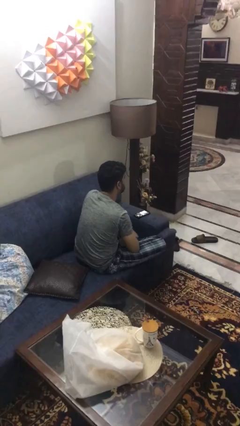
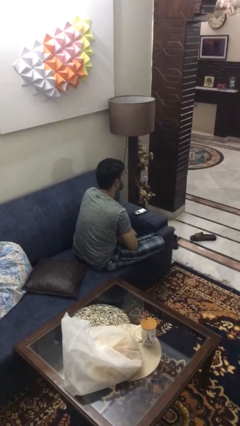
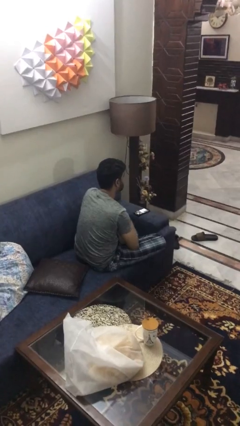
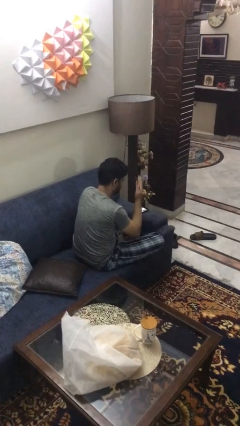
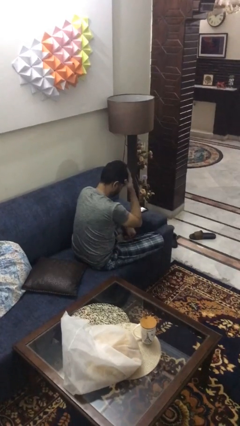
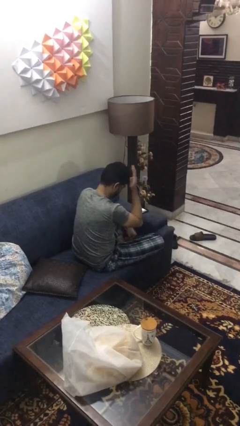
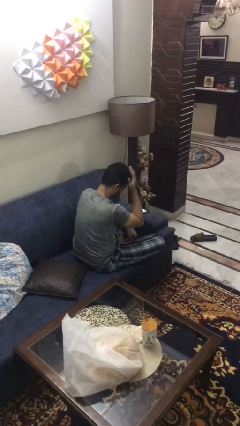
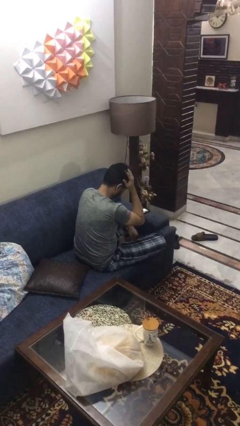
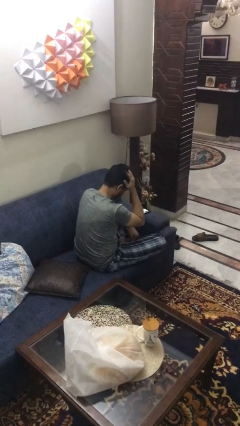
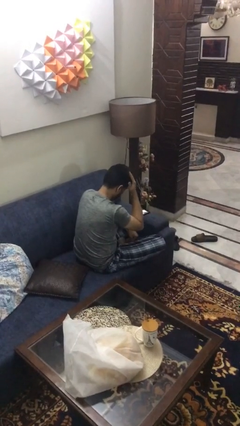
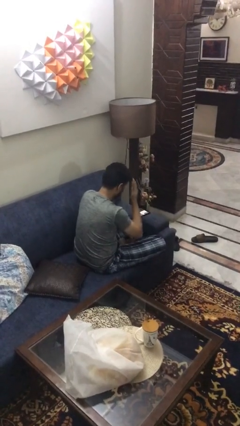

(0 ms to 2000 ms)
person strokes hair

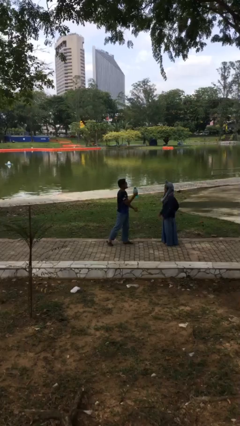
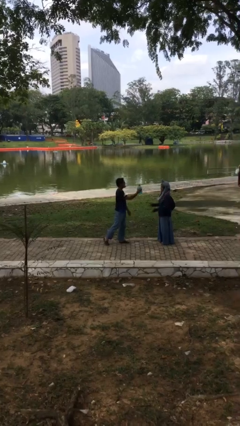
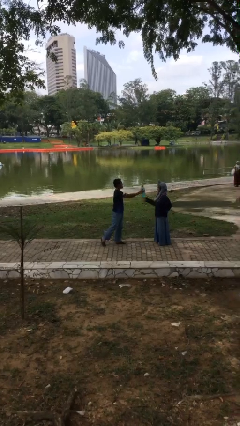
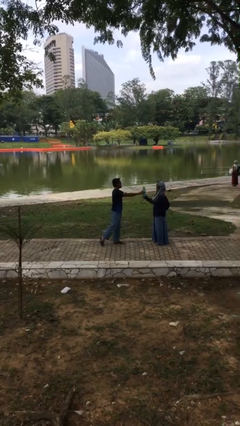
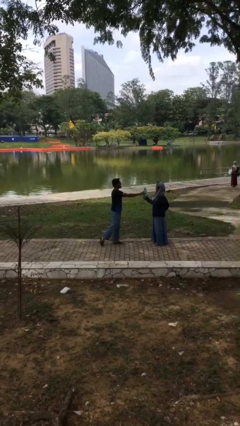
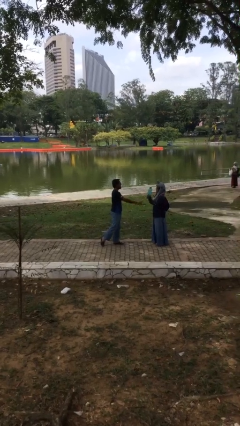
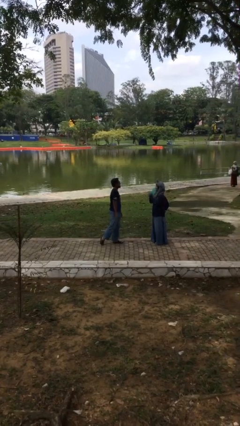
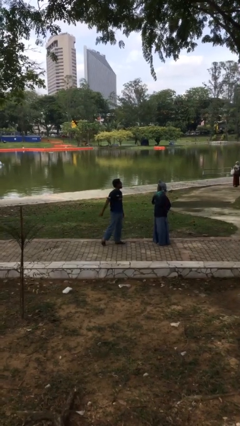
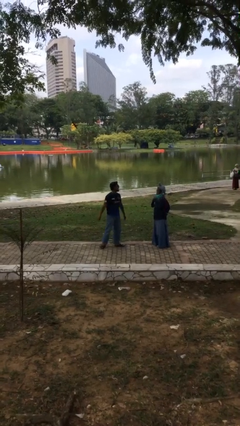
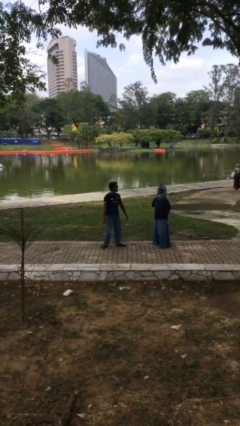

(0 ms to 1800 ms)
person transfers object to person

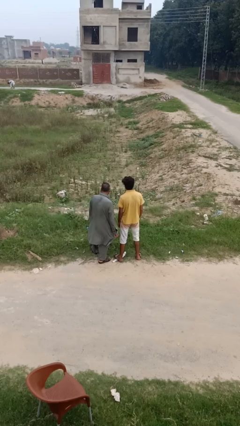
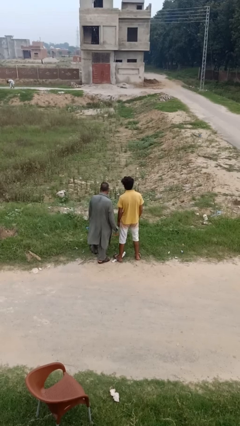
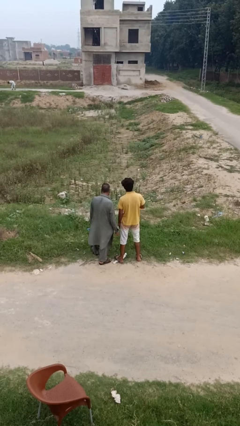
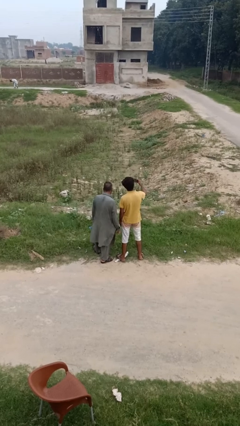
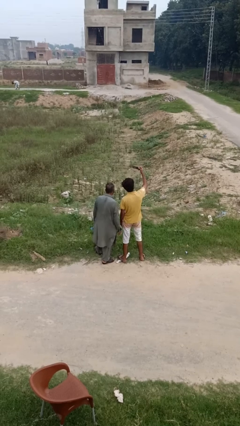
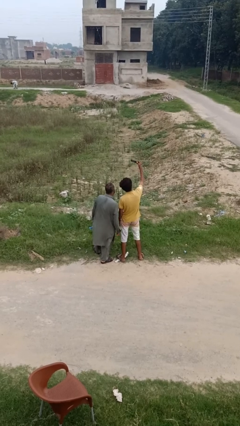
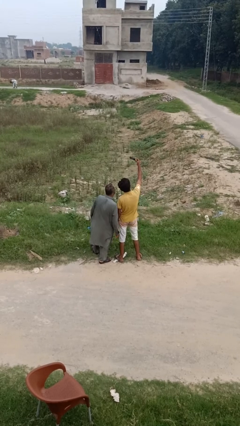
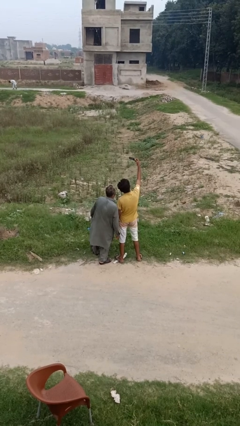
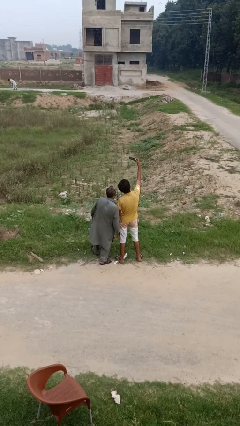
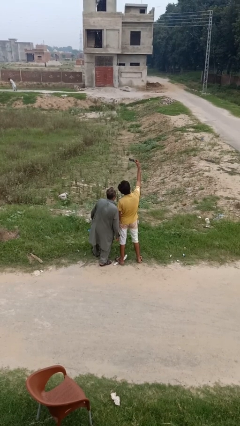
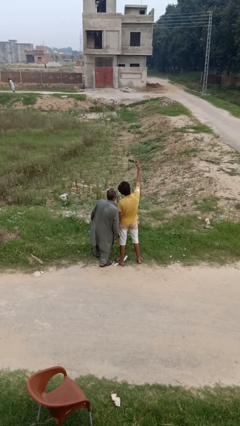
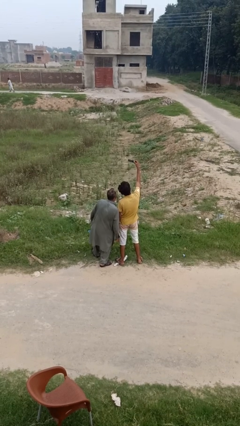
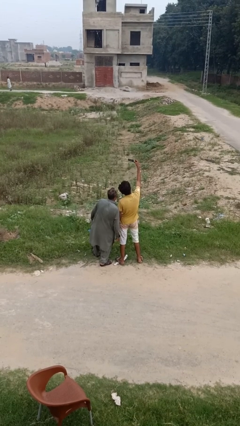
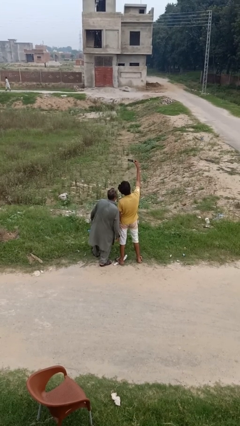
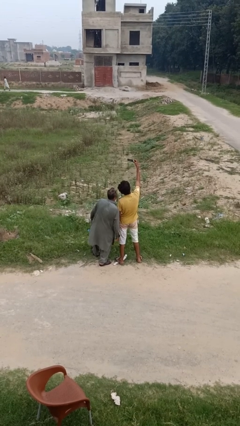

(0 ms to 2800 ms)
person takes selfie with person

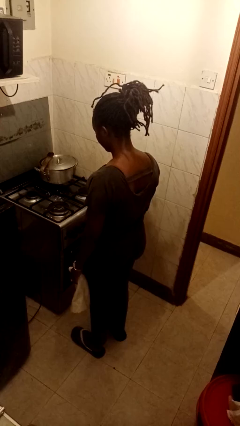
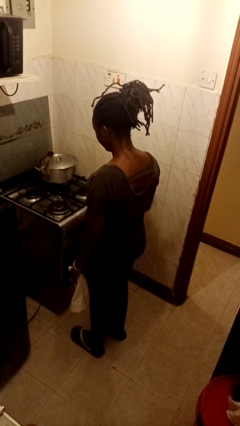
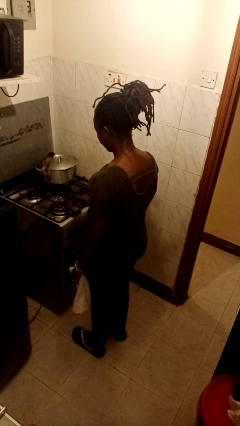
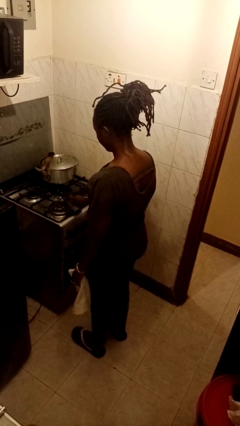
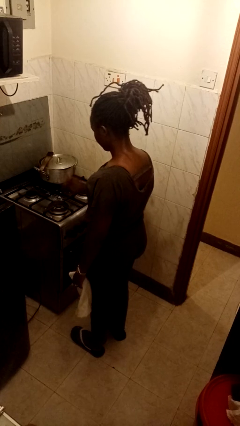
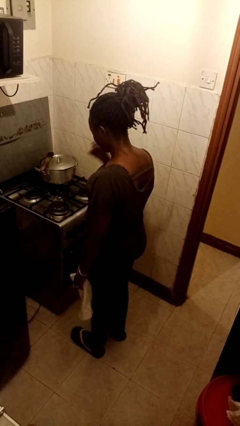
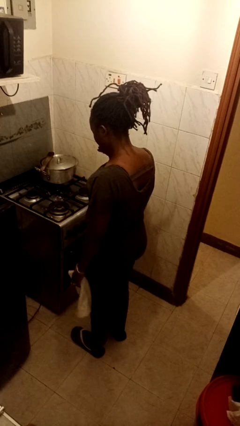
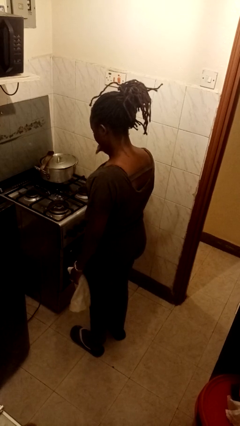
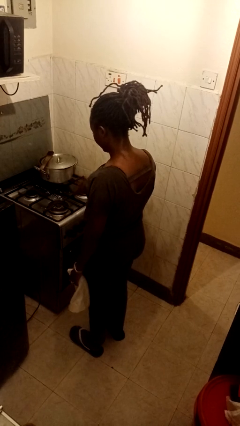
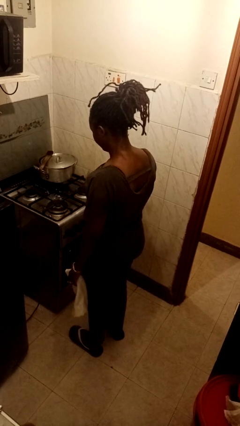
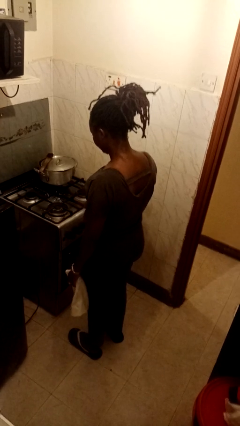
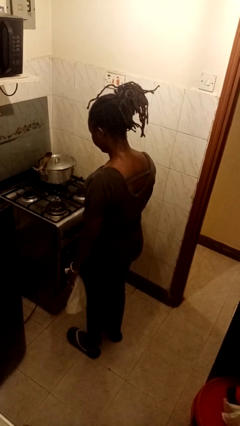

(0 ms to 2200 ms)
person burns hand

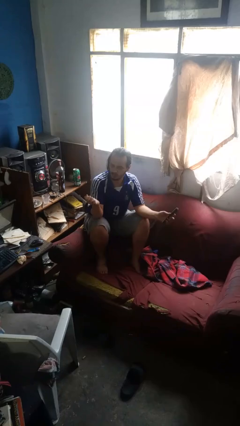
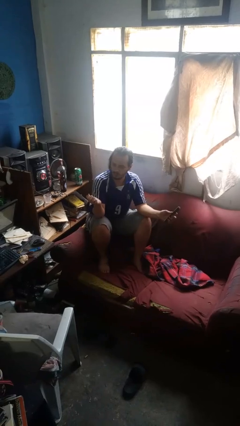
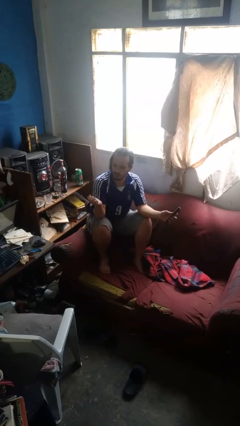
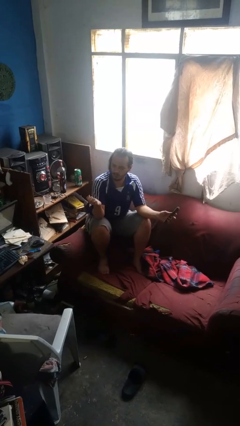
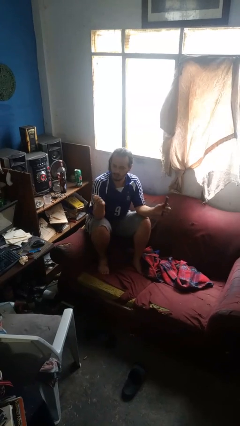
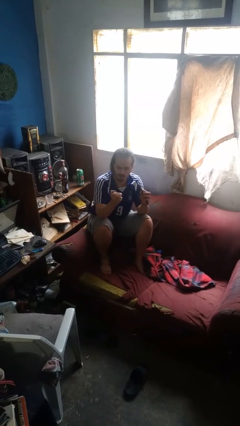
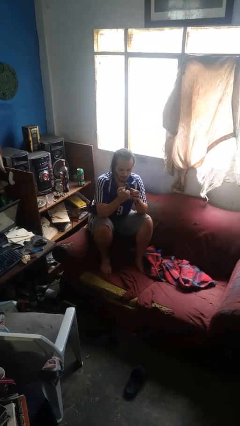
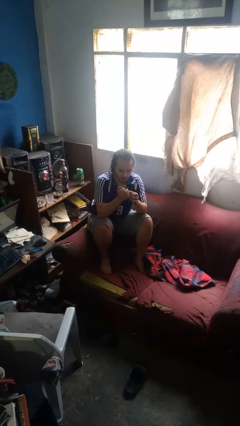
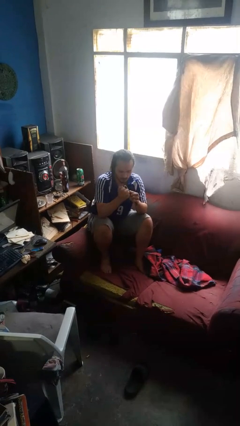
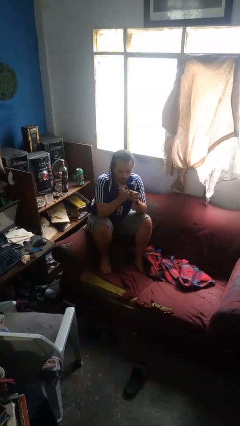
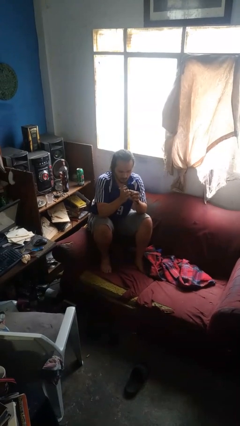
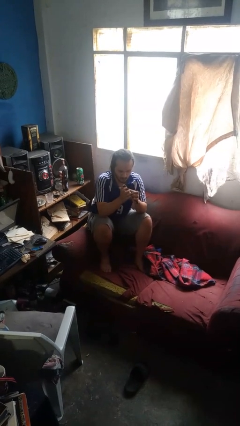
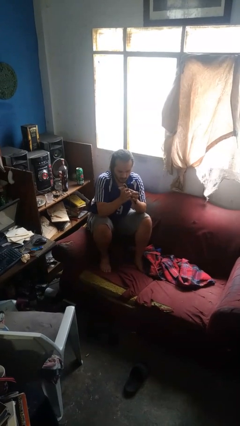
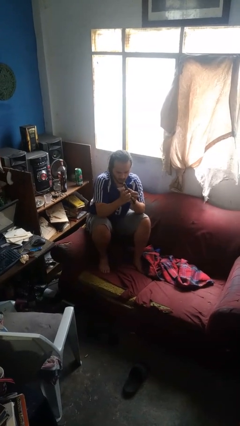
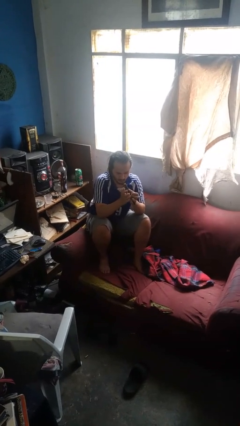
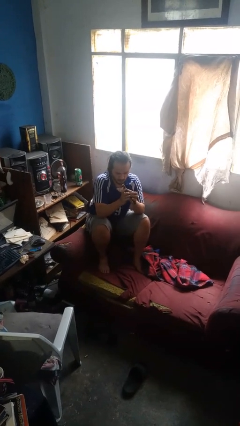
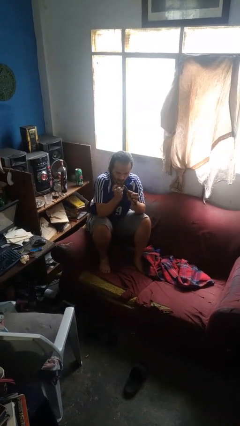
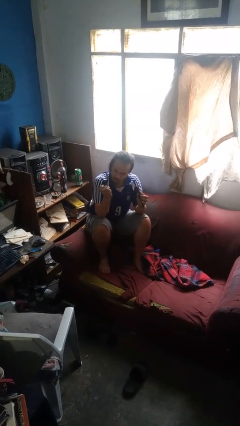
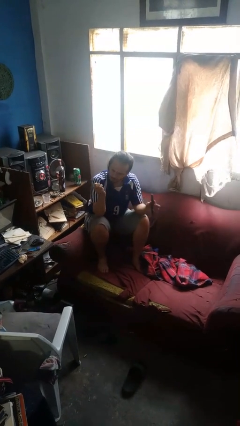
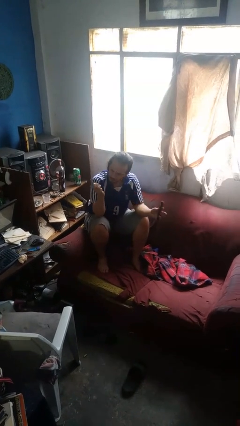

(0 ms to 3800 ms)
person files fingernails

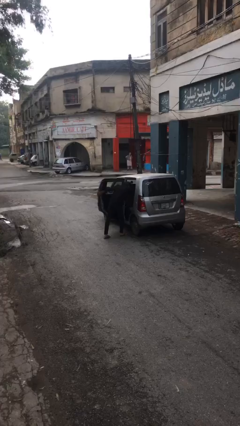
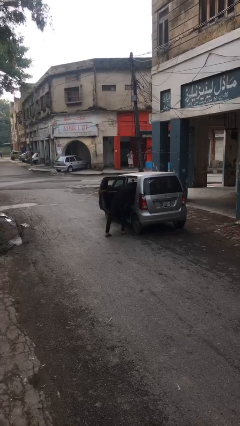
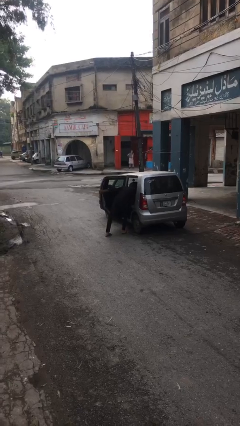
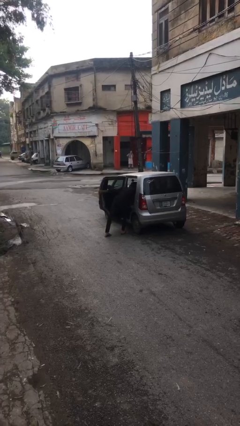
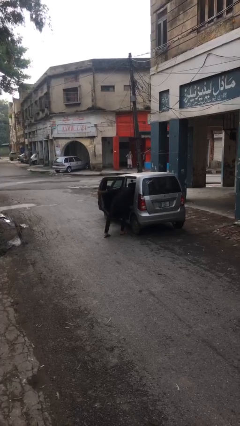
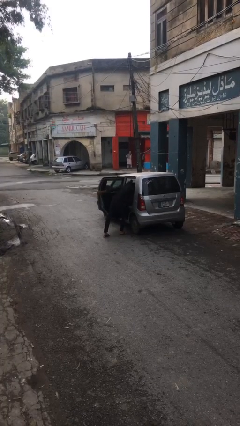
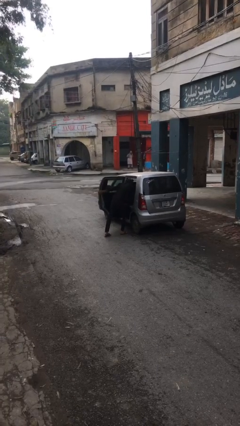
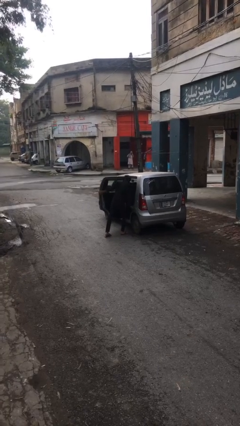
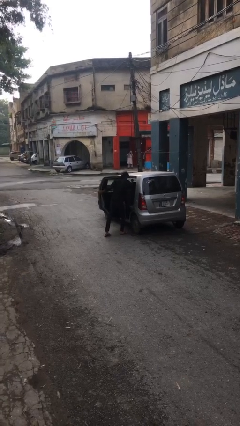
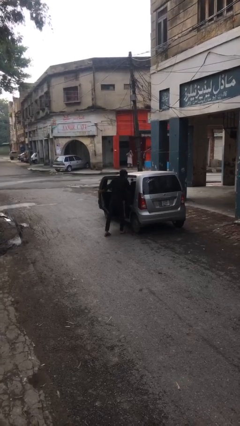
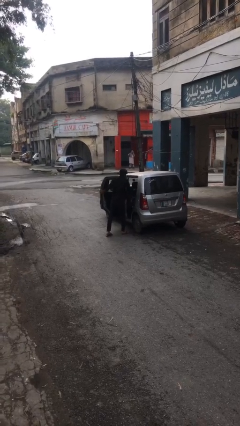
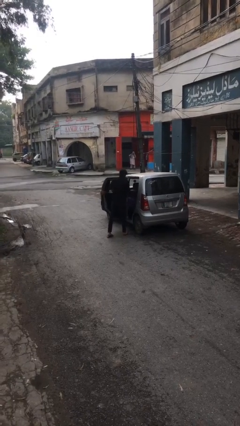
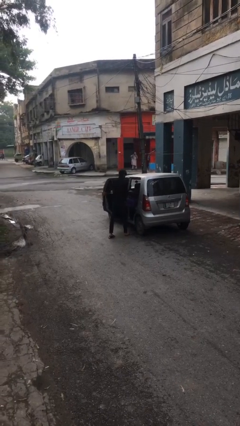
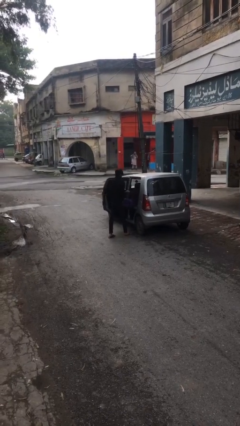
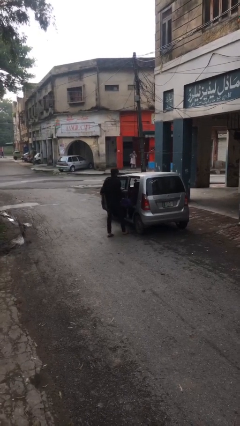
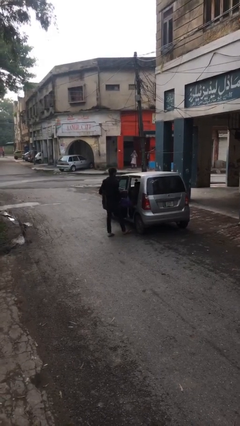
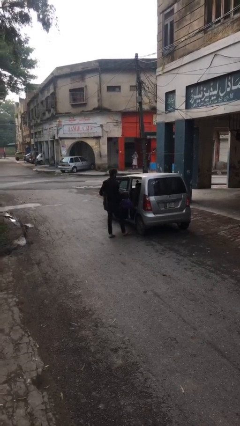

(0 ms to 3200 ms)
person unloads car

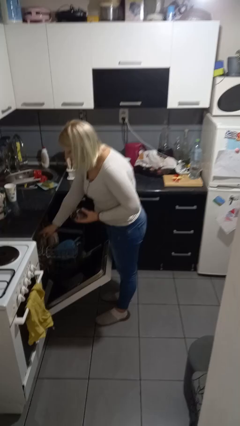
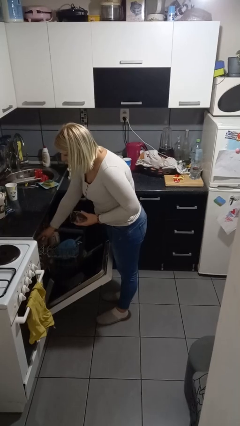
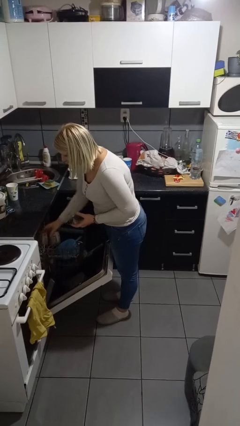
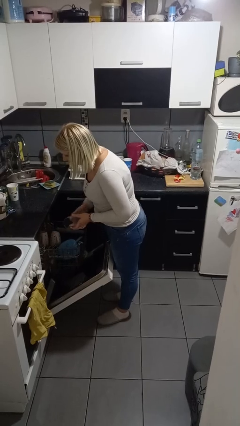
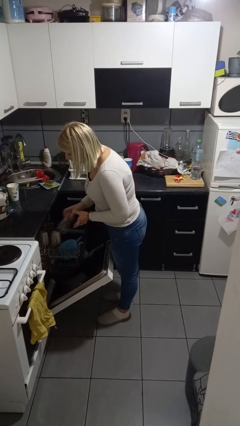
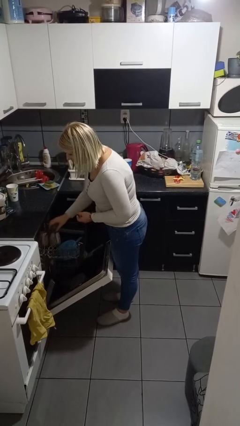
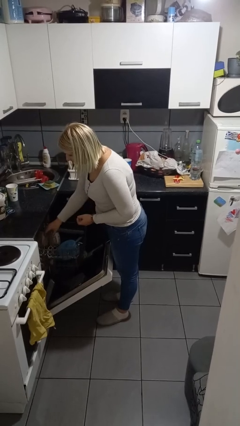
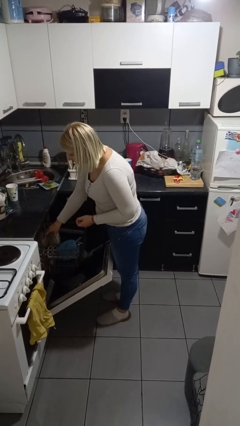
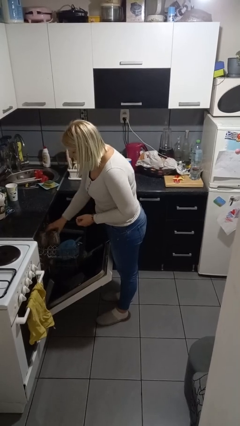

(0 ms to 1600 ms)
person loads dishwasher
